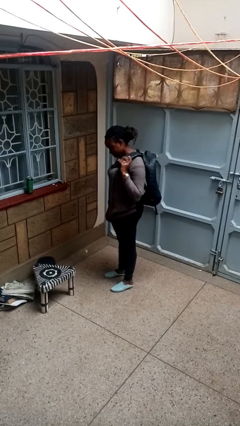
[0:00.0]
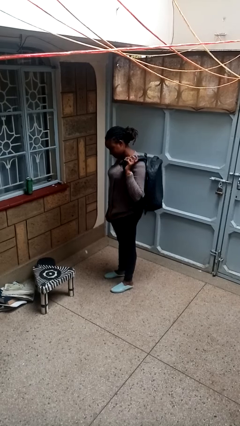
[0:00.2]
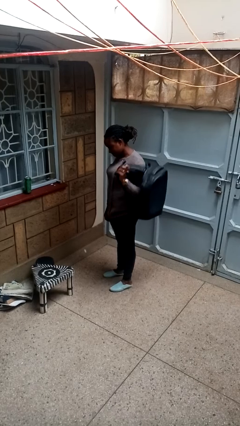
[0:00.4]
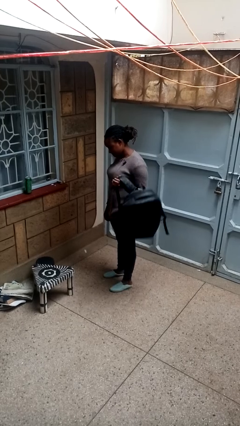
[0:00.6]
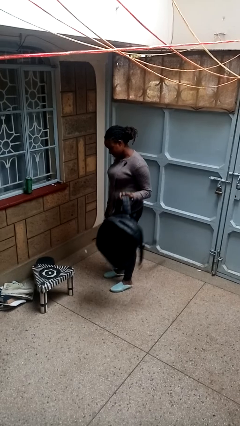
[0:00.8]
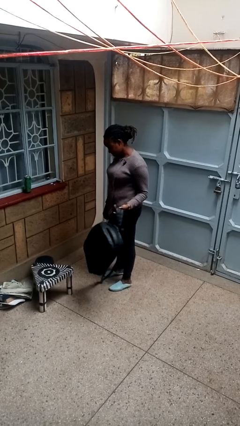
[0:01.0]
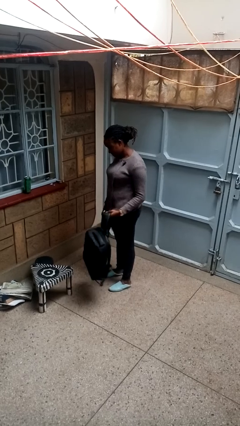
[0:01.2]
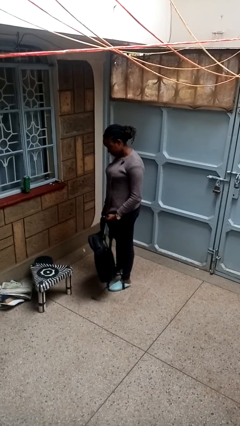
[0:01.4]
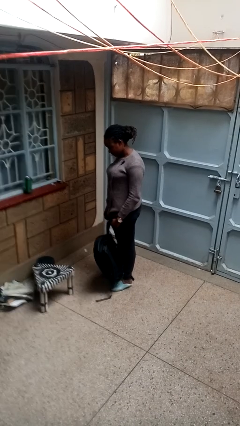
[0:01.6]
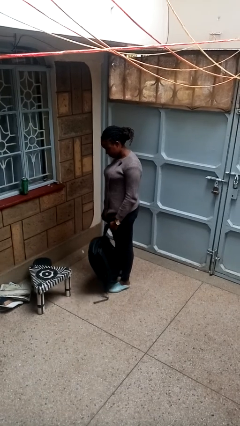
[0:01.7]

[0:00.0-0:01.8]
person takes off backpack

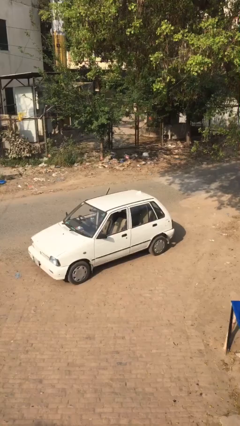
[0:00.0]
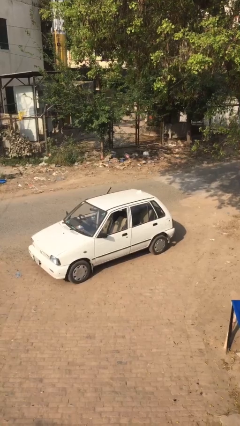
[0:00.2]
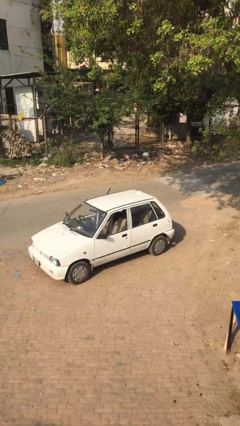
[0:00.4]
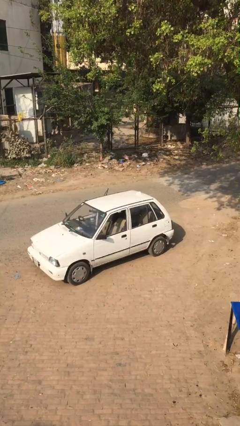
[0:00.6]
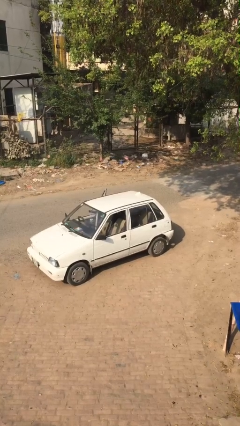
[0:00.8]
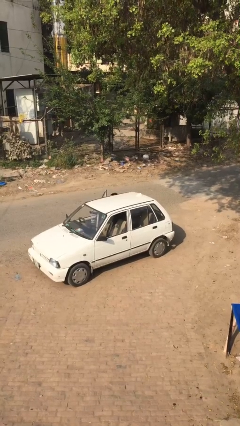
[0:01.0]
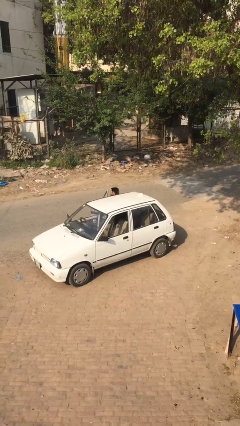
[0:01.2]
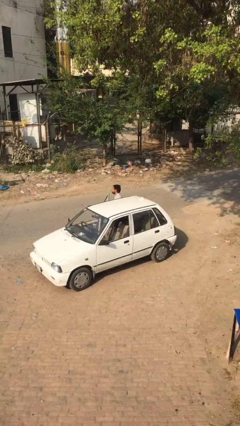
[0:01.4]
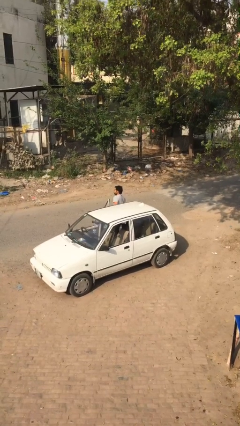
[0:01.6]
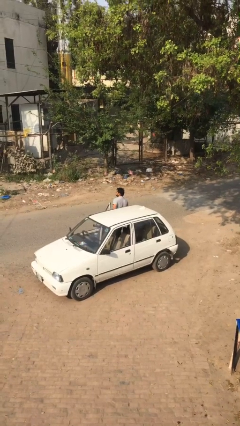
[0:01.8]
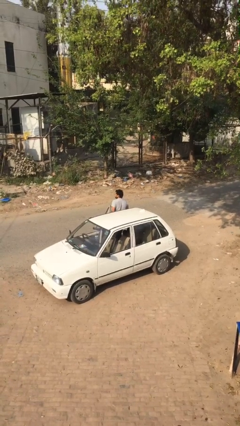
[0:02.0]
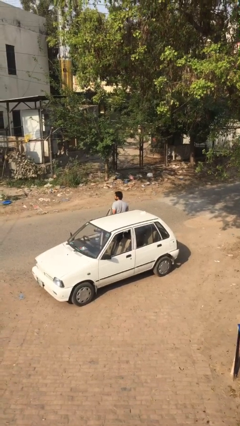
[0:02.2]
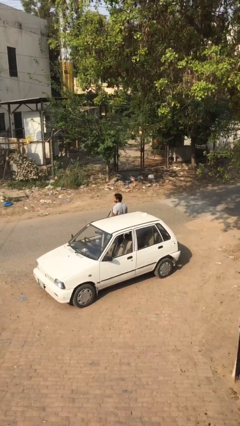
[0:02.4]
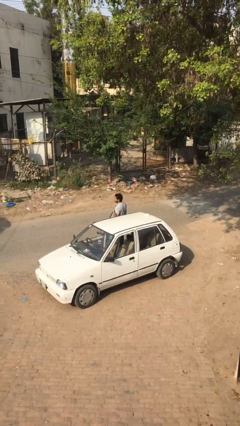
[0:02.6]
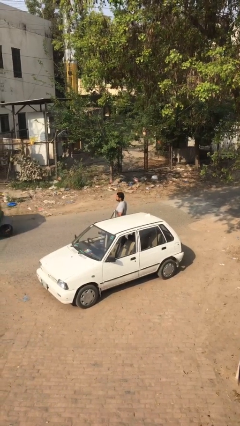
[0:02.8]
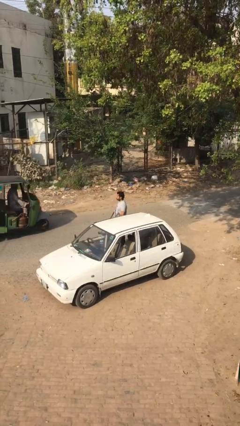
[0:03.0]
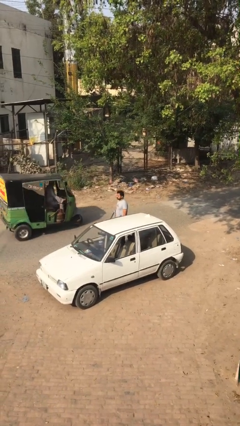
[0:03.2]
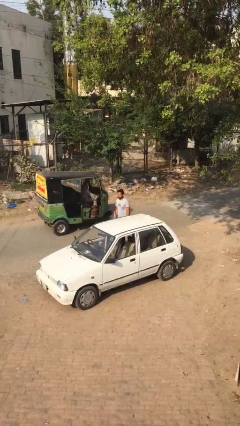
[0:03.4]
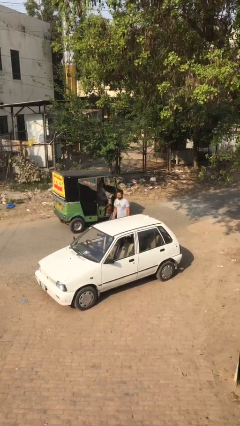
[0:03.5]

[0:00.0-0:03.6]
person exits car

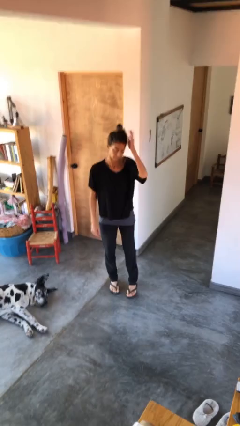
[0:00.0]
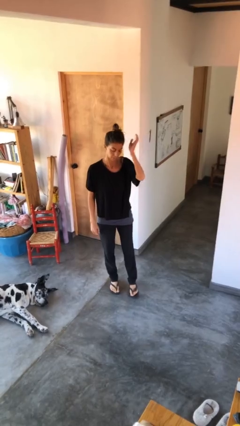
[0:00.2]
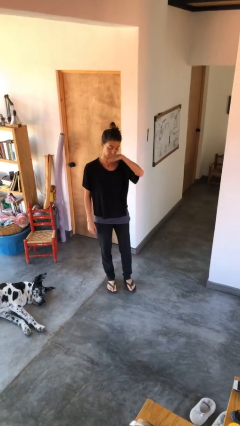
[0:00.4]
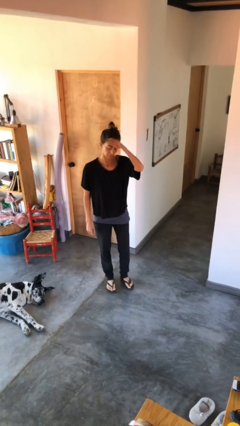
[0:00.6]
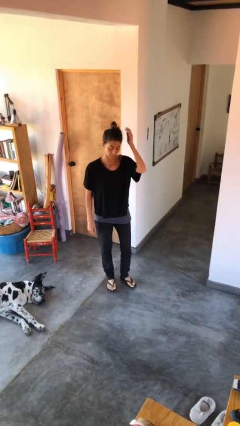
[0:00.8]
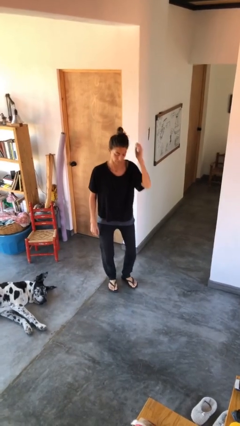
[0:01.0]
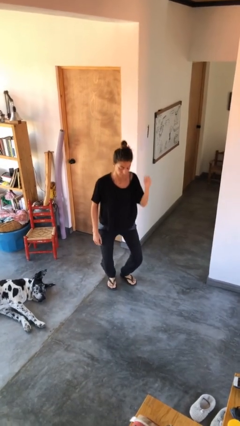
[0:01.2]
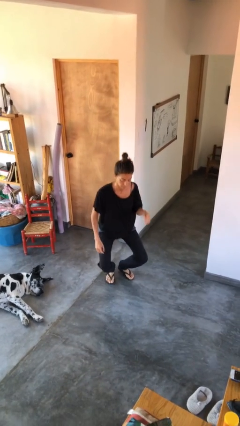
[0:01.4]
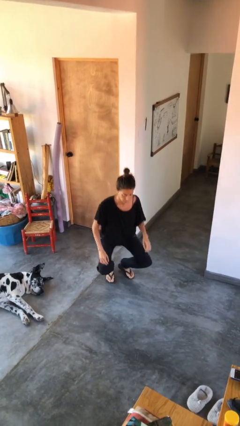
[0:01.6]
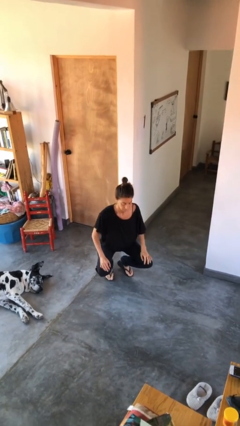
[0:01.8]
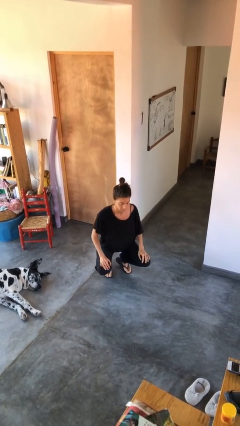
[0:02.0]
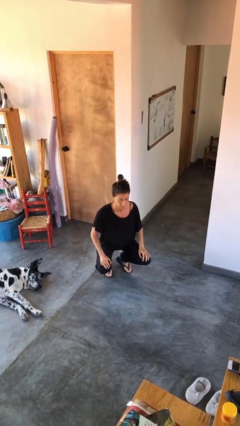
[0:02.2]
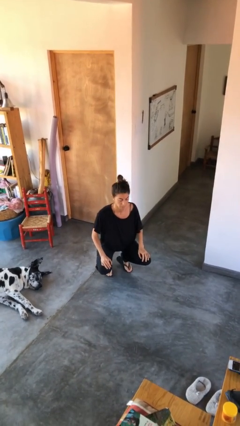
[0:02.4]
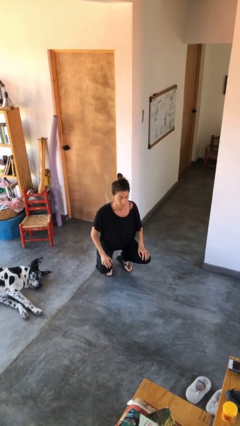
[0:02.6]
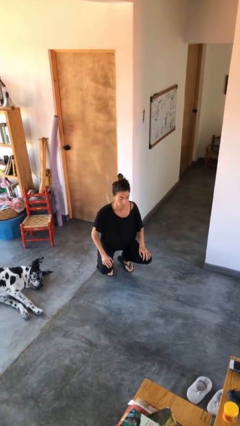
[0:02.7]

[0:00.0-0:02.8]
person squats

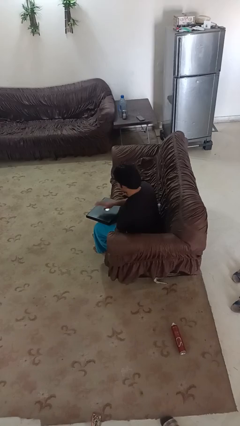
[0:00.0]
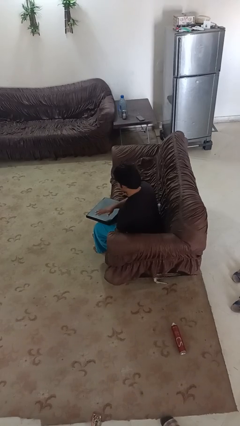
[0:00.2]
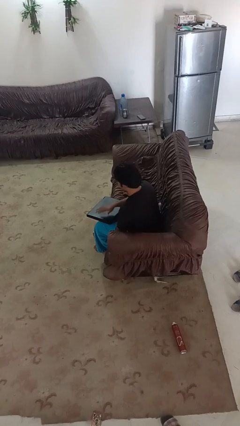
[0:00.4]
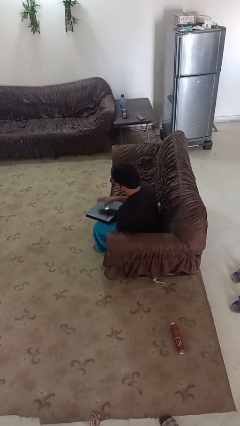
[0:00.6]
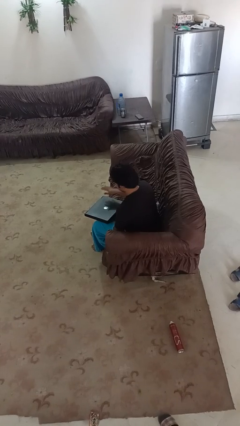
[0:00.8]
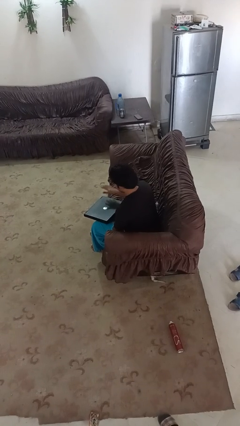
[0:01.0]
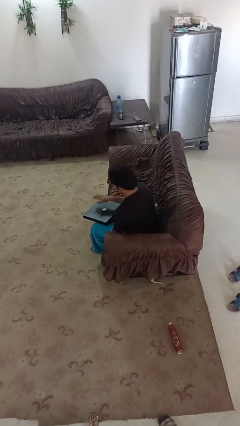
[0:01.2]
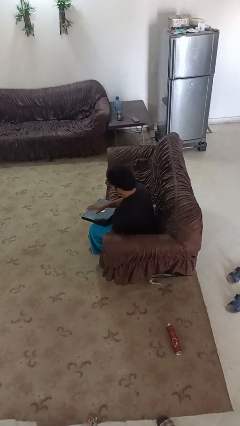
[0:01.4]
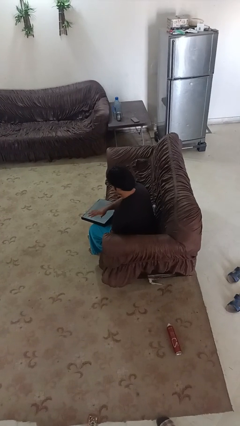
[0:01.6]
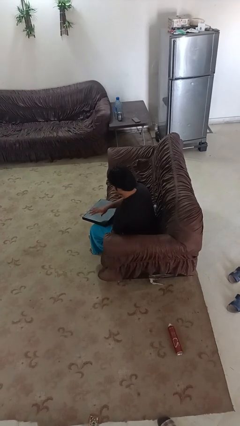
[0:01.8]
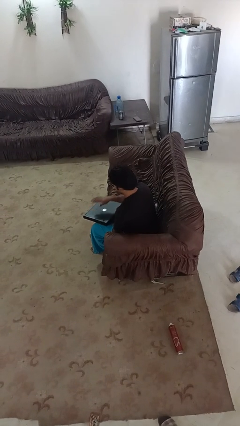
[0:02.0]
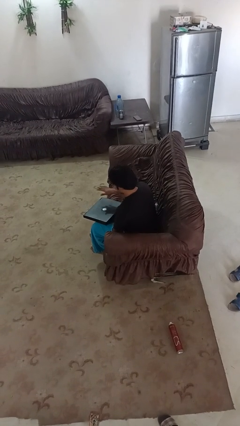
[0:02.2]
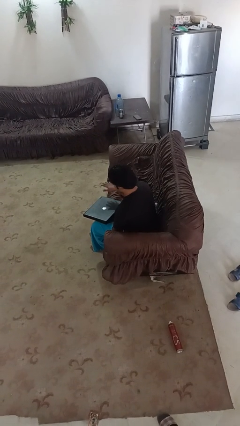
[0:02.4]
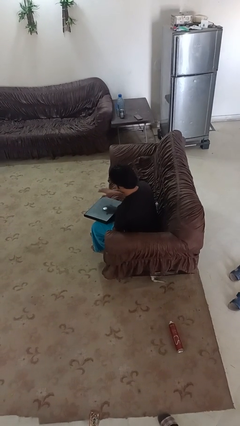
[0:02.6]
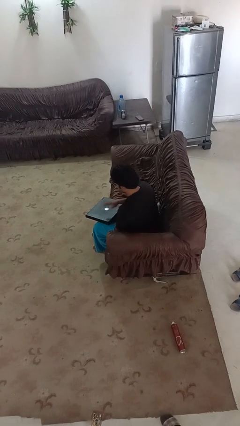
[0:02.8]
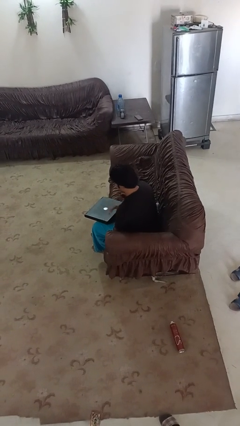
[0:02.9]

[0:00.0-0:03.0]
person waves hand over object

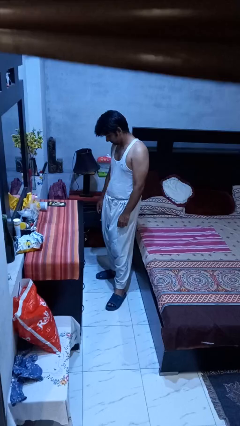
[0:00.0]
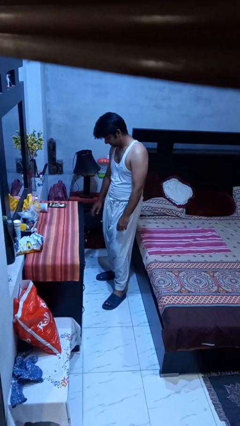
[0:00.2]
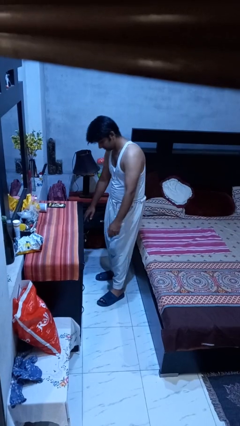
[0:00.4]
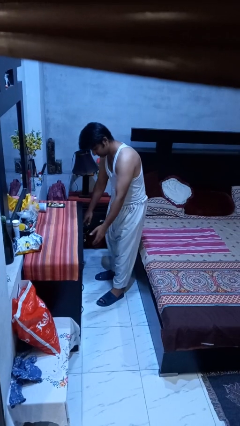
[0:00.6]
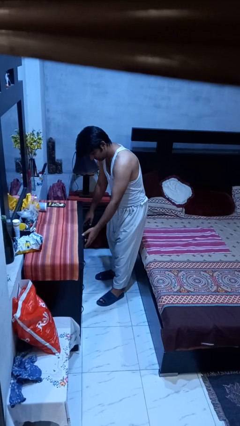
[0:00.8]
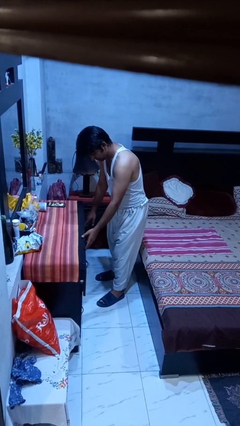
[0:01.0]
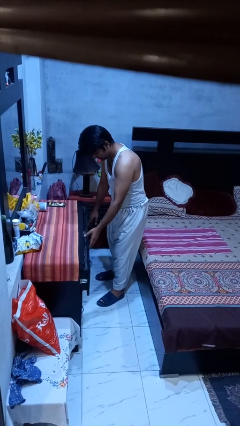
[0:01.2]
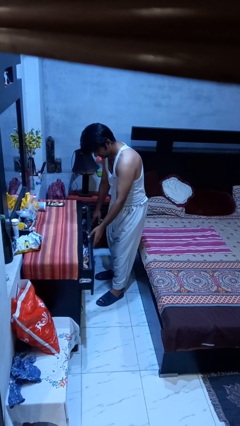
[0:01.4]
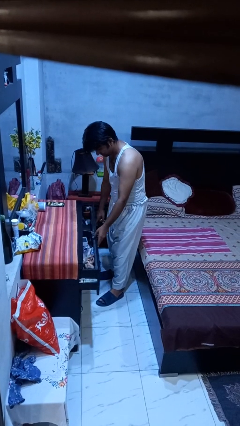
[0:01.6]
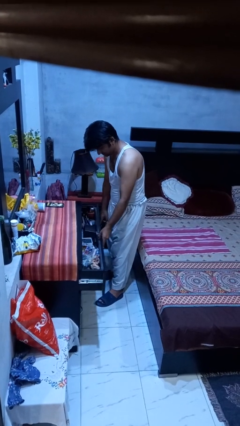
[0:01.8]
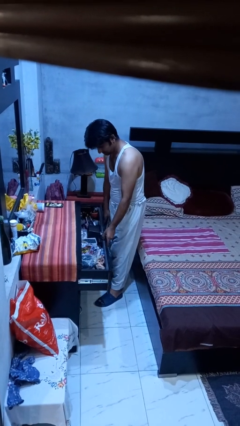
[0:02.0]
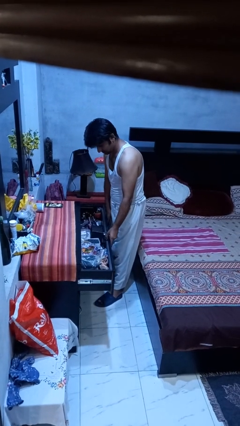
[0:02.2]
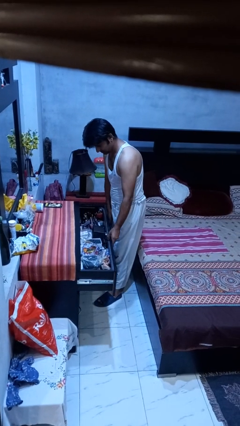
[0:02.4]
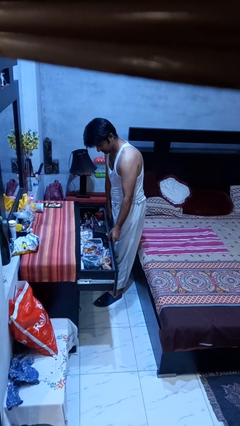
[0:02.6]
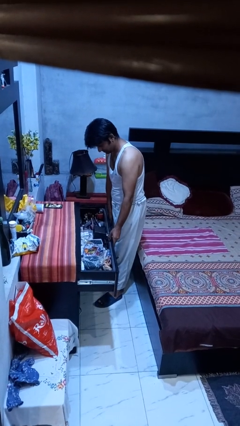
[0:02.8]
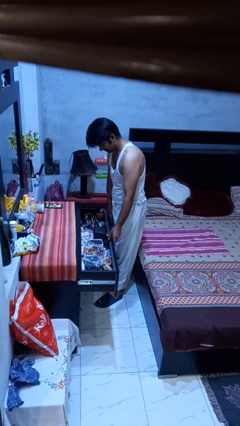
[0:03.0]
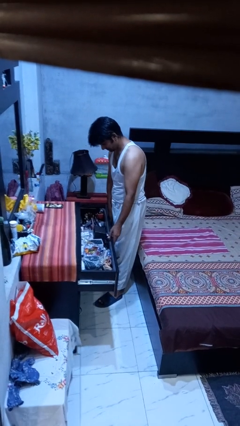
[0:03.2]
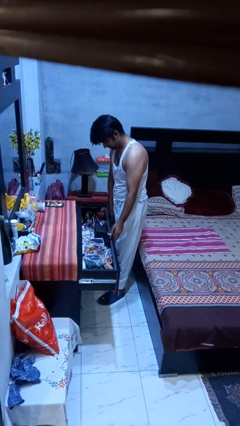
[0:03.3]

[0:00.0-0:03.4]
person opens dresser drawer

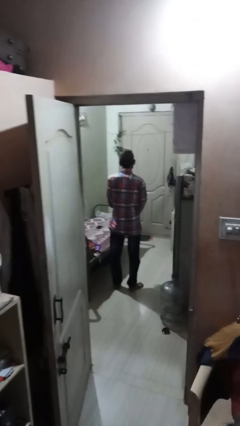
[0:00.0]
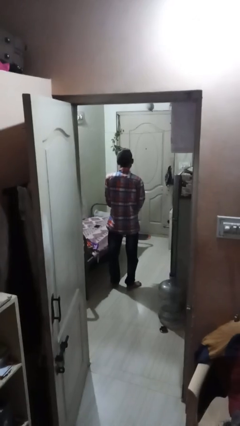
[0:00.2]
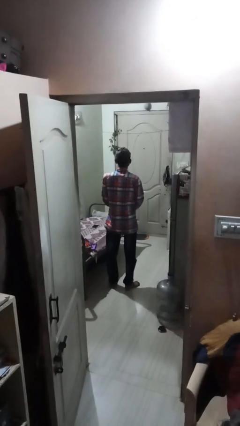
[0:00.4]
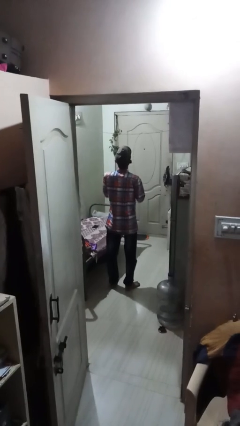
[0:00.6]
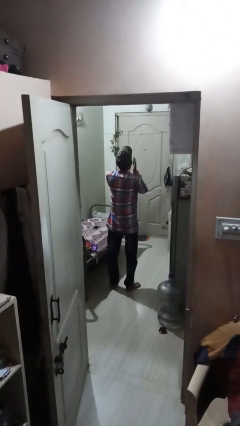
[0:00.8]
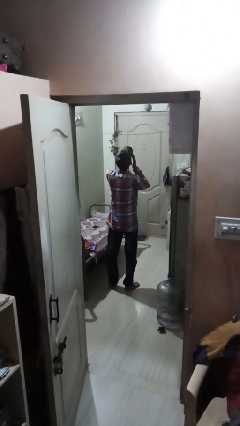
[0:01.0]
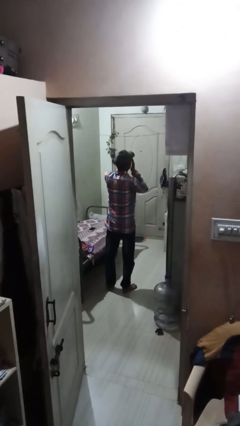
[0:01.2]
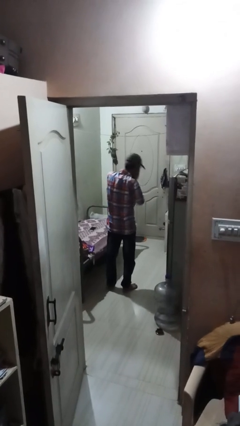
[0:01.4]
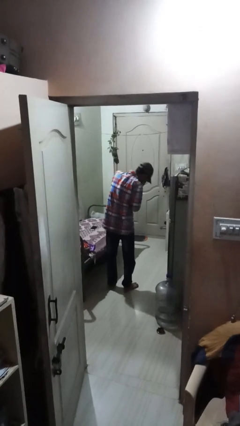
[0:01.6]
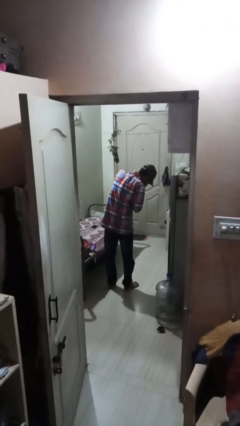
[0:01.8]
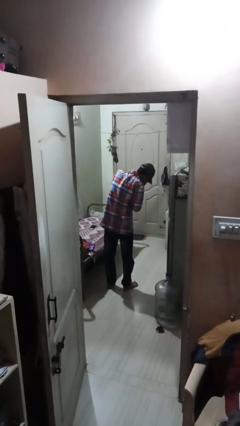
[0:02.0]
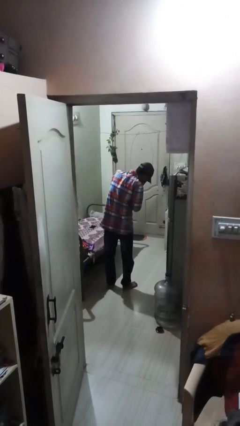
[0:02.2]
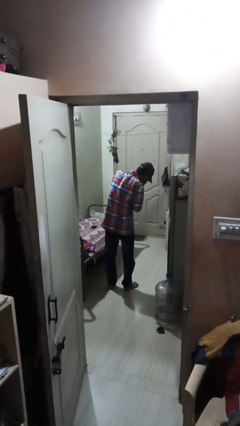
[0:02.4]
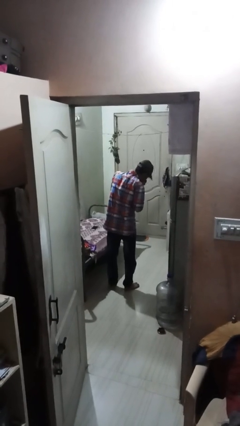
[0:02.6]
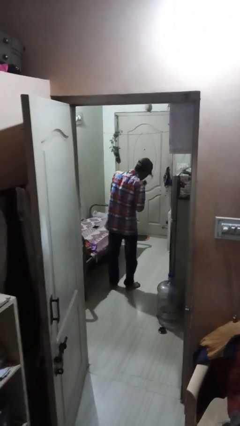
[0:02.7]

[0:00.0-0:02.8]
person sneezes into hand

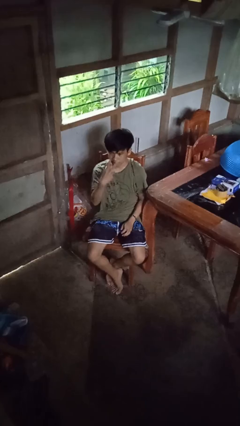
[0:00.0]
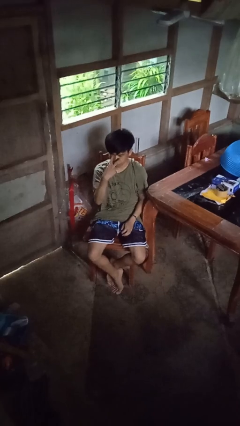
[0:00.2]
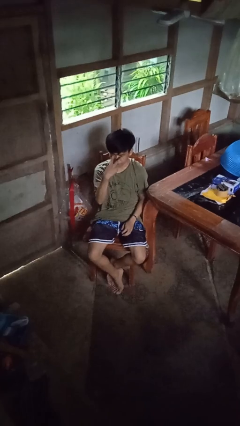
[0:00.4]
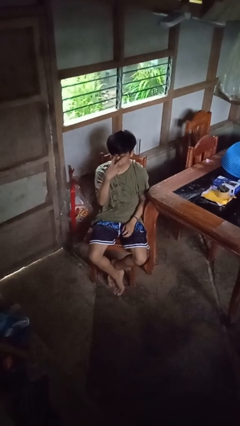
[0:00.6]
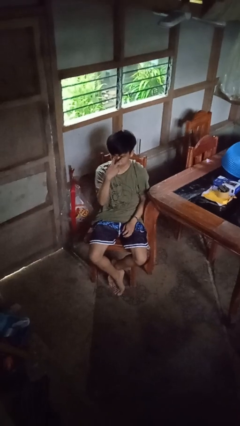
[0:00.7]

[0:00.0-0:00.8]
person gestures watch closely
